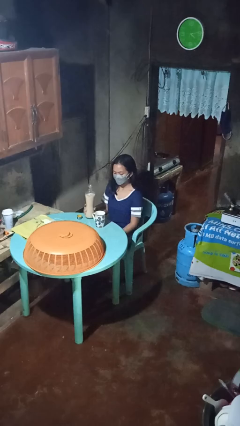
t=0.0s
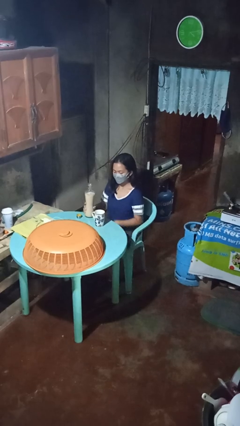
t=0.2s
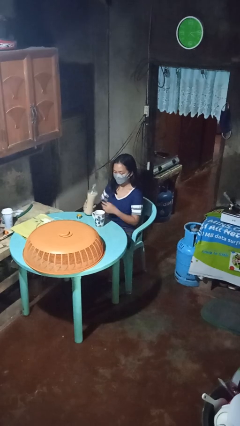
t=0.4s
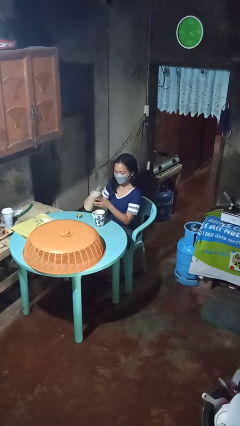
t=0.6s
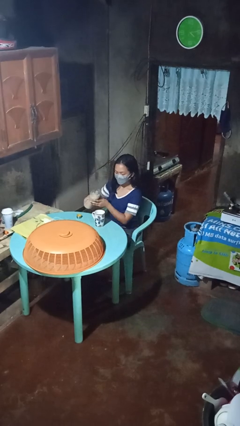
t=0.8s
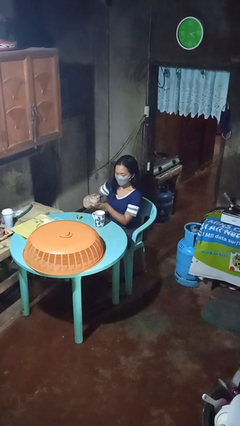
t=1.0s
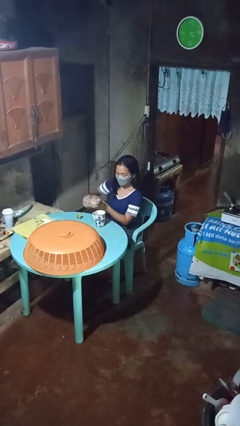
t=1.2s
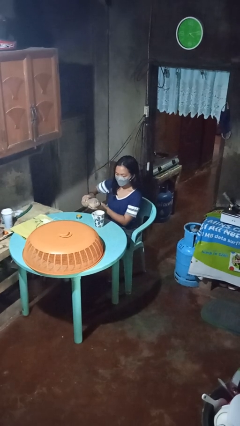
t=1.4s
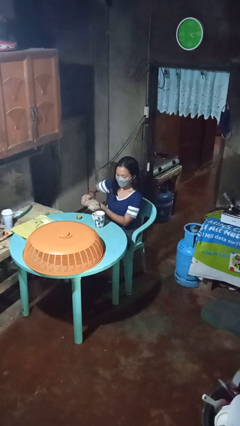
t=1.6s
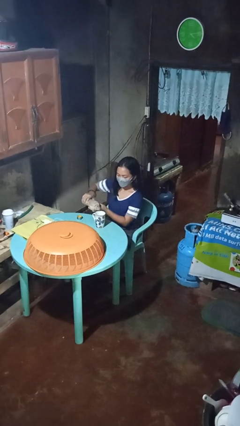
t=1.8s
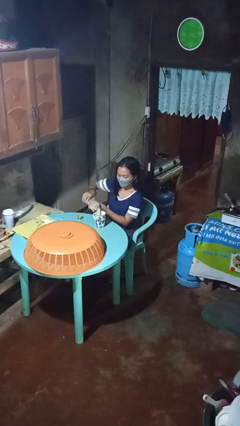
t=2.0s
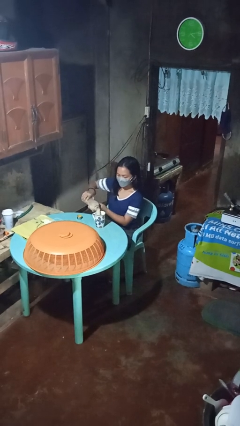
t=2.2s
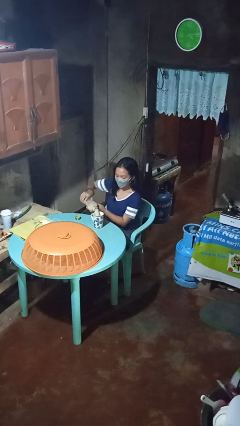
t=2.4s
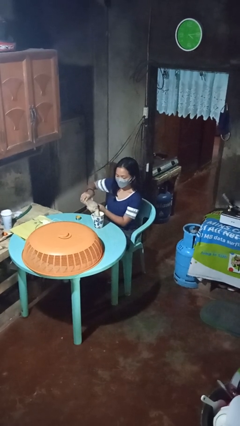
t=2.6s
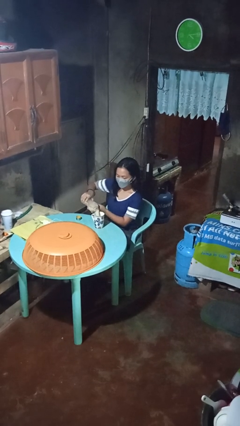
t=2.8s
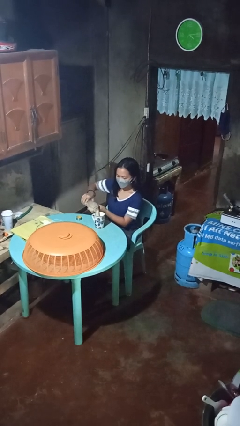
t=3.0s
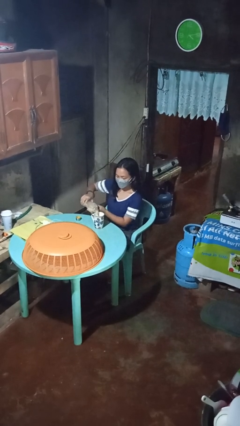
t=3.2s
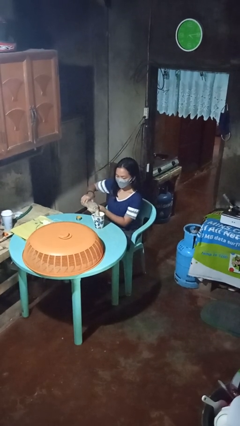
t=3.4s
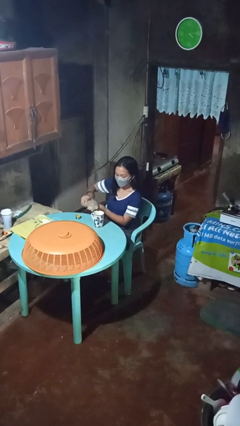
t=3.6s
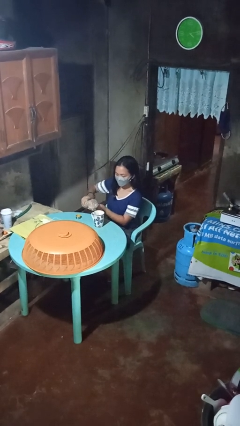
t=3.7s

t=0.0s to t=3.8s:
person pours coffee into mug

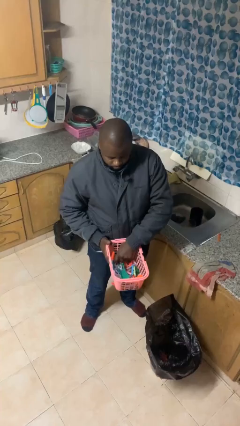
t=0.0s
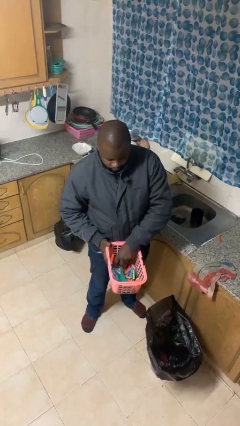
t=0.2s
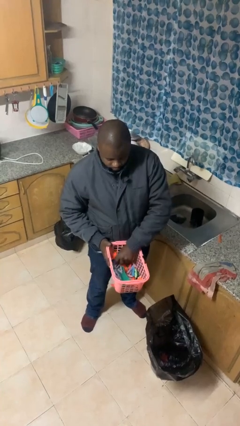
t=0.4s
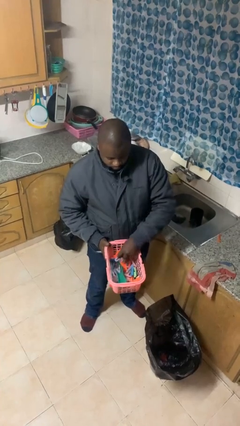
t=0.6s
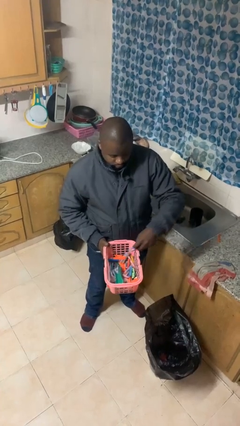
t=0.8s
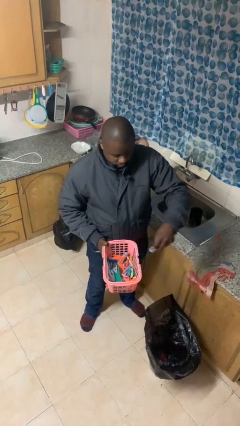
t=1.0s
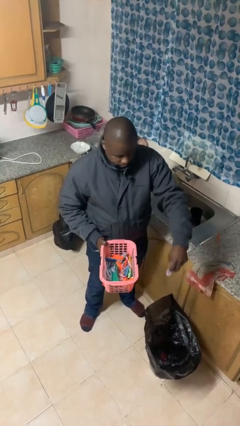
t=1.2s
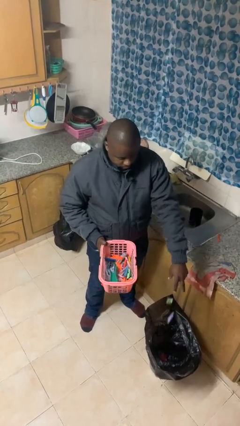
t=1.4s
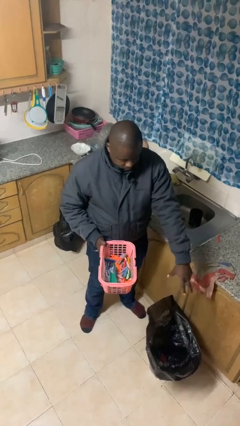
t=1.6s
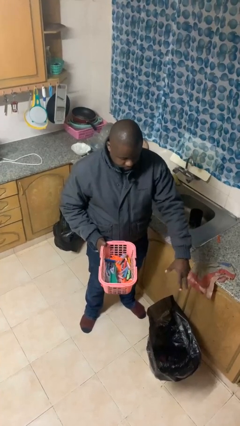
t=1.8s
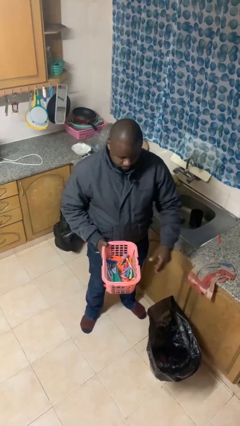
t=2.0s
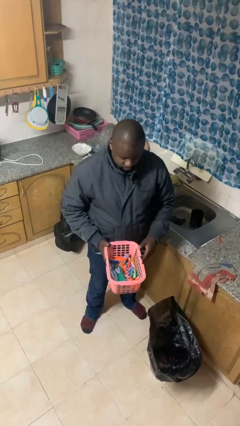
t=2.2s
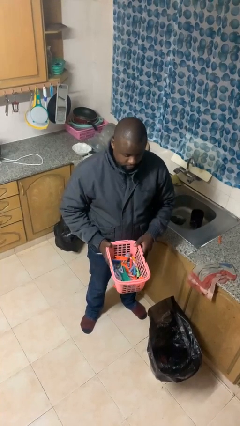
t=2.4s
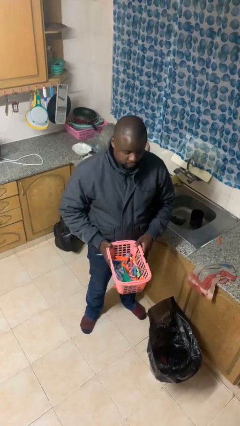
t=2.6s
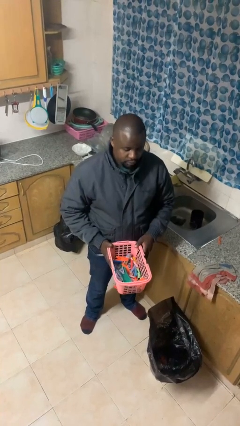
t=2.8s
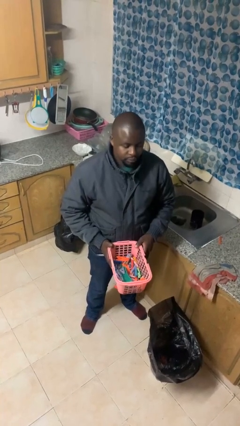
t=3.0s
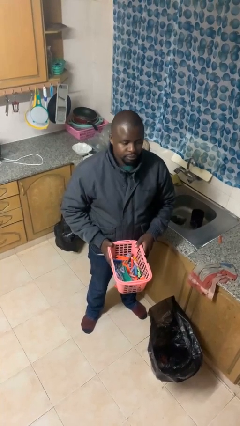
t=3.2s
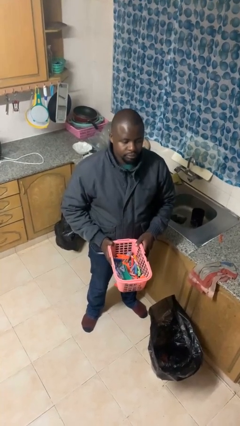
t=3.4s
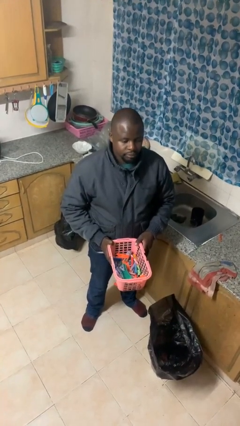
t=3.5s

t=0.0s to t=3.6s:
person discards trash

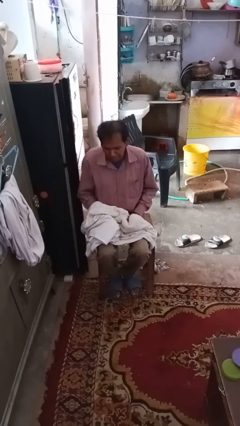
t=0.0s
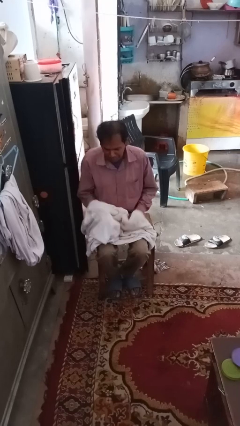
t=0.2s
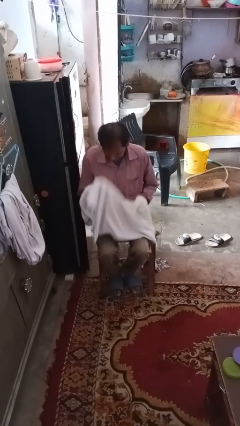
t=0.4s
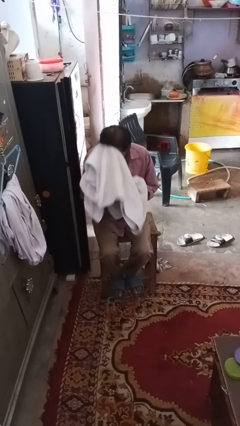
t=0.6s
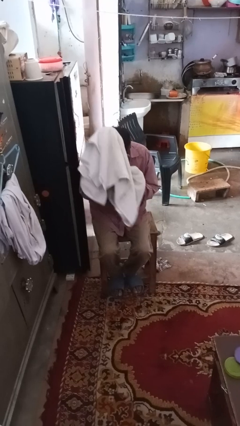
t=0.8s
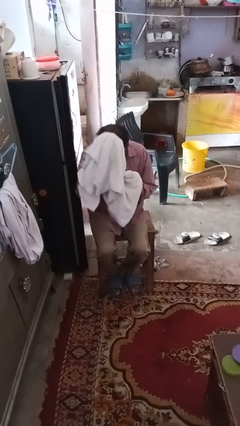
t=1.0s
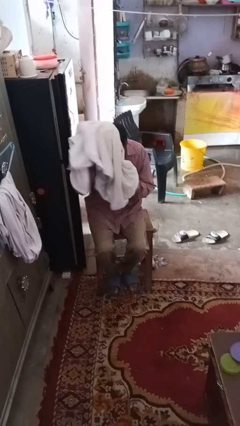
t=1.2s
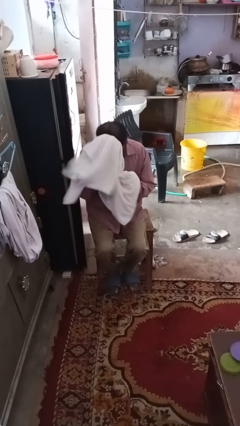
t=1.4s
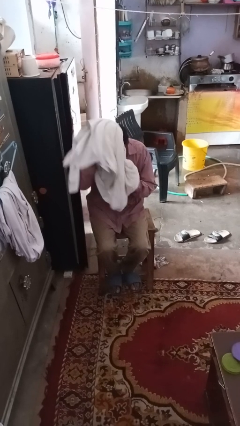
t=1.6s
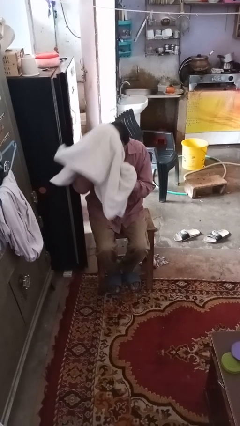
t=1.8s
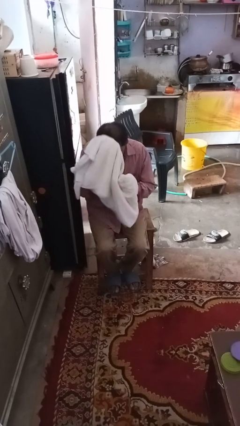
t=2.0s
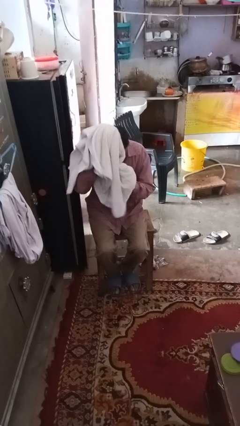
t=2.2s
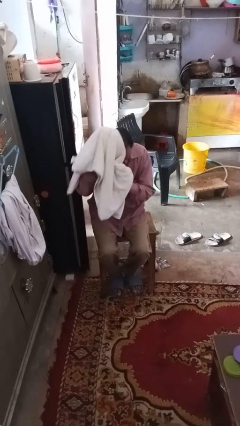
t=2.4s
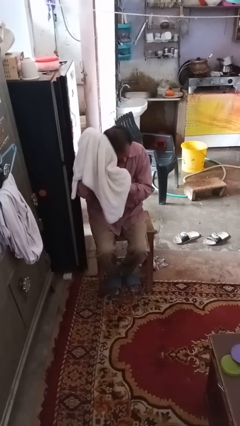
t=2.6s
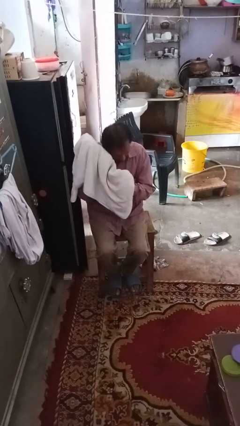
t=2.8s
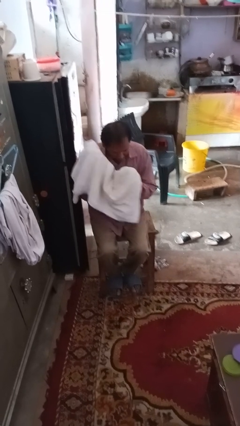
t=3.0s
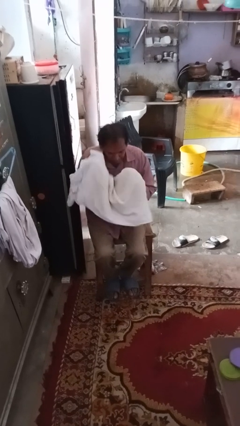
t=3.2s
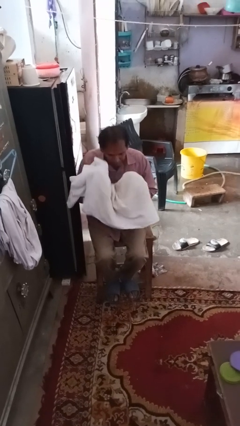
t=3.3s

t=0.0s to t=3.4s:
person dries hair with towel

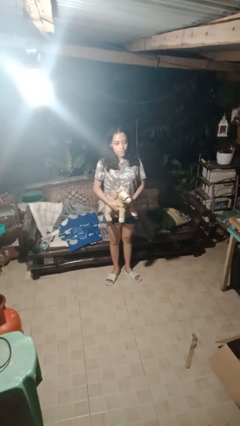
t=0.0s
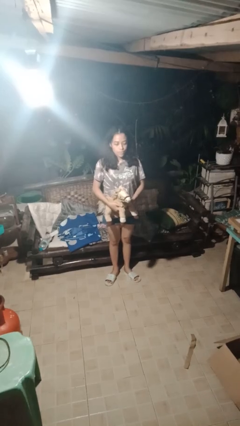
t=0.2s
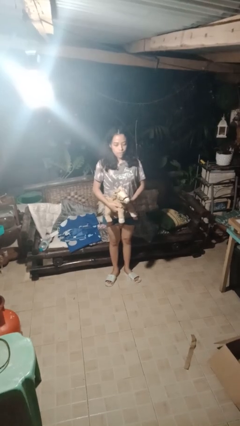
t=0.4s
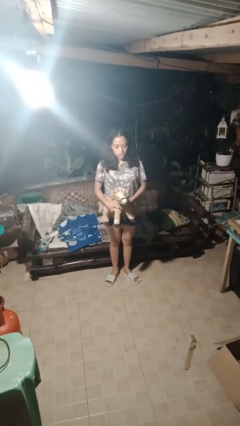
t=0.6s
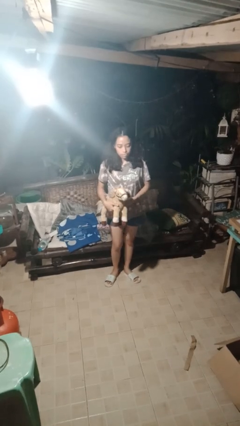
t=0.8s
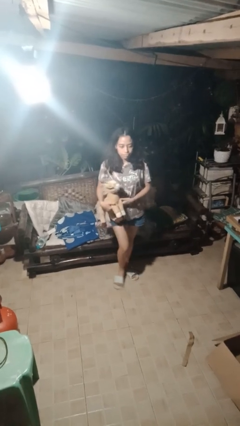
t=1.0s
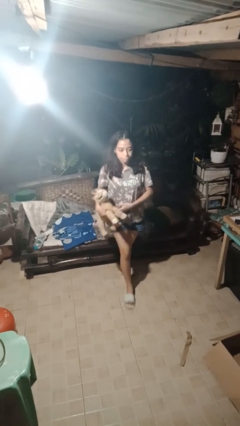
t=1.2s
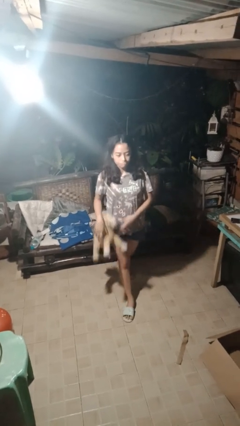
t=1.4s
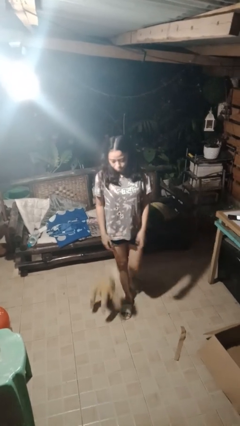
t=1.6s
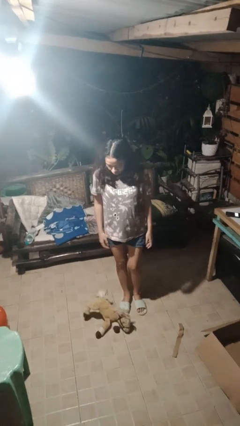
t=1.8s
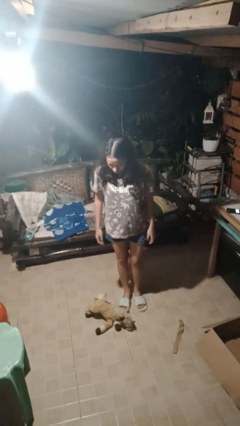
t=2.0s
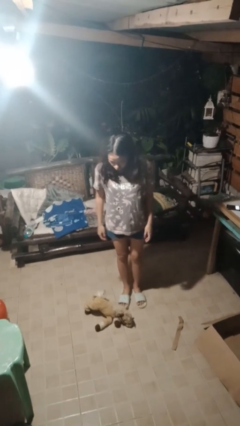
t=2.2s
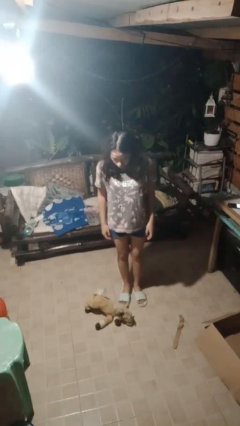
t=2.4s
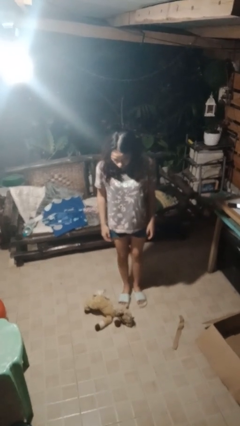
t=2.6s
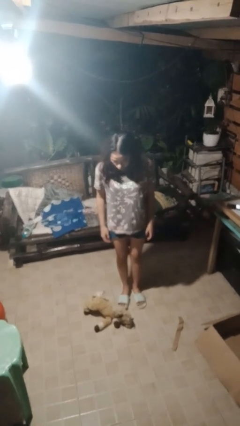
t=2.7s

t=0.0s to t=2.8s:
person drops object

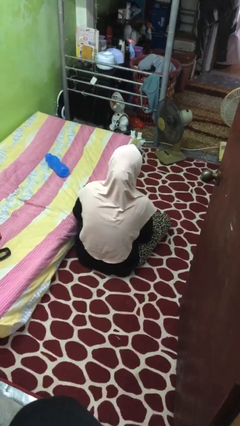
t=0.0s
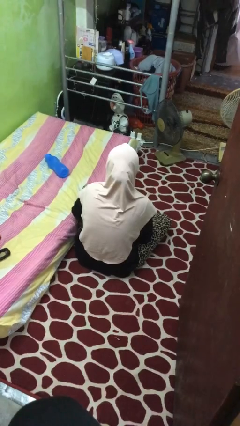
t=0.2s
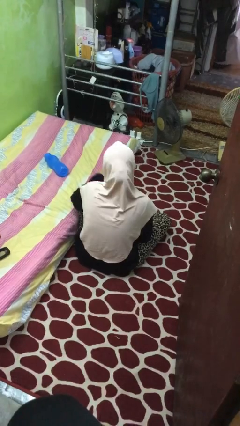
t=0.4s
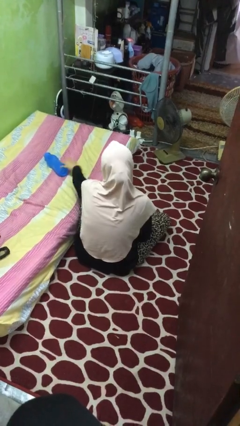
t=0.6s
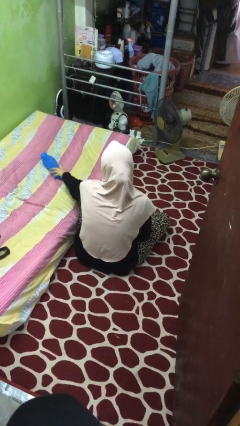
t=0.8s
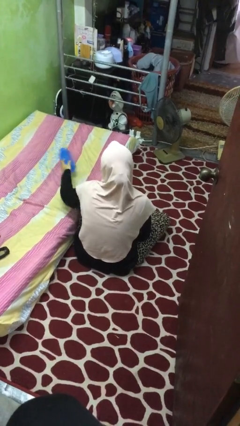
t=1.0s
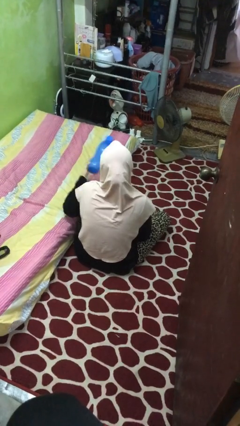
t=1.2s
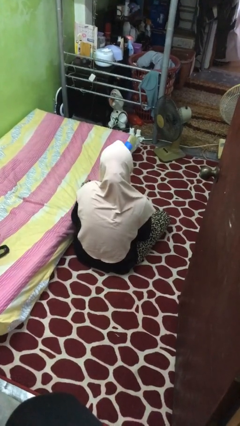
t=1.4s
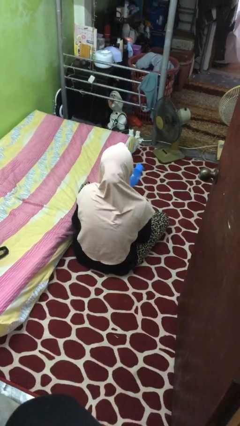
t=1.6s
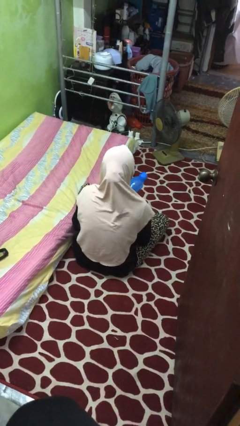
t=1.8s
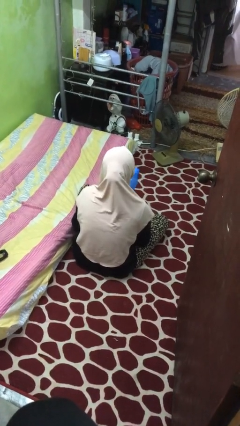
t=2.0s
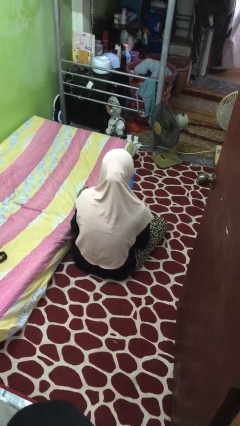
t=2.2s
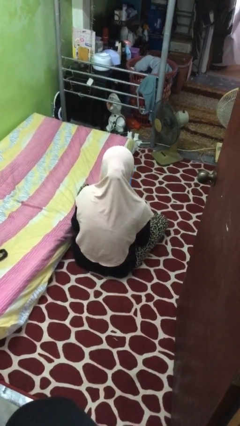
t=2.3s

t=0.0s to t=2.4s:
person picks up object from bed

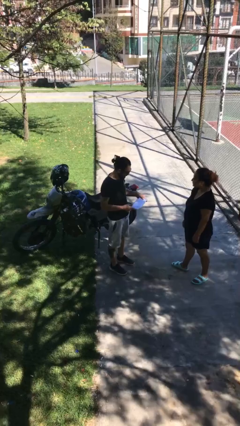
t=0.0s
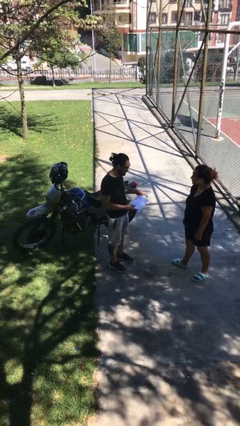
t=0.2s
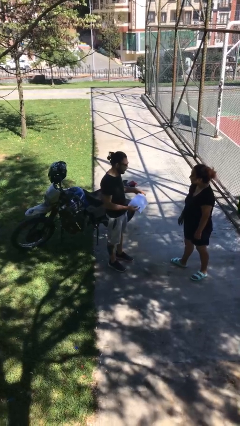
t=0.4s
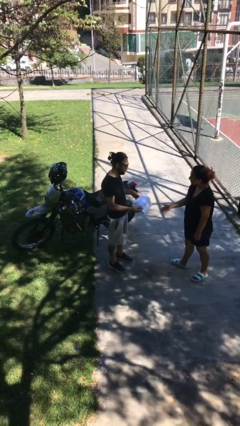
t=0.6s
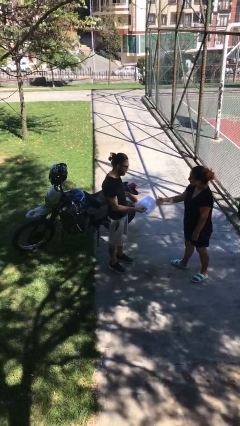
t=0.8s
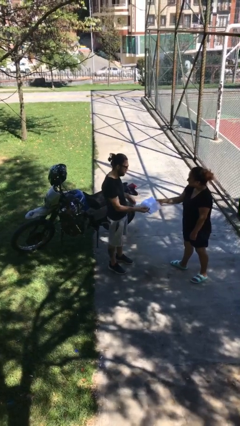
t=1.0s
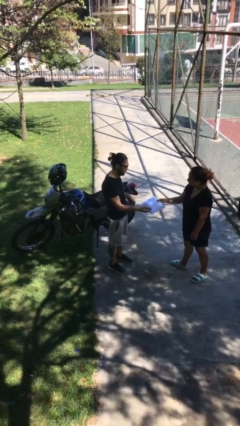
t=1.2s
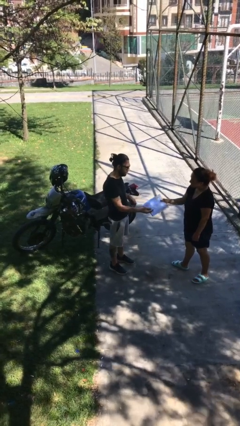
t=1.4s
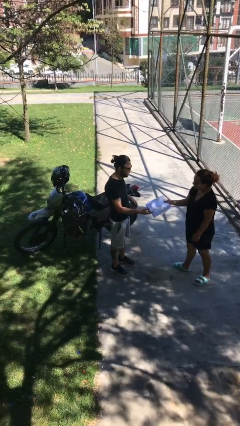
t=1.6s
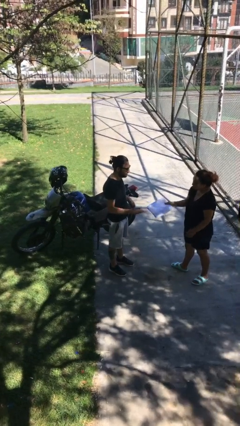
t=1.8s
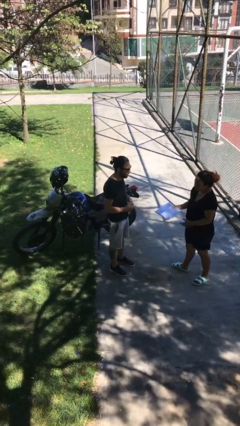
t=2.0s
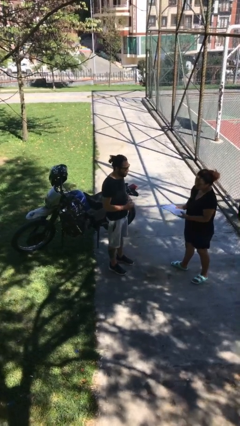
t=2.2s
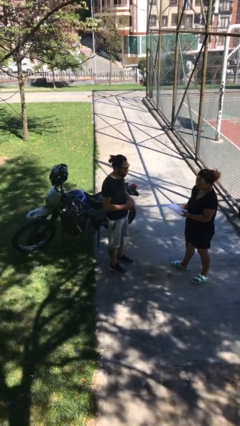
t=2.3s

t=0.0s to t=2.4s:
person transfers object to person
